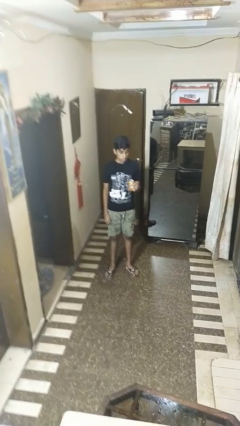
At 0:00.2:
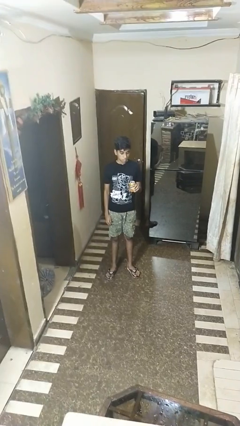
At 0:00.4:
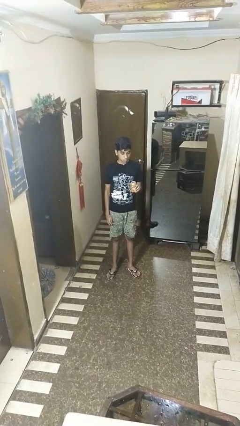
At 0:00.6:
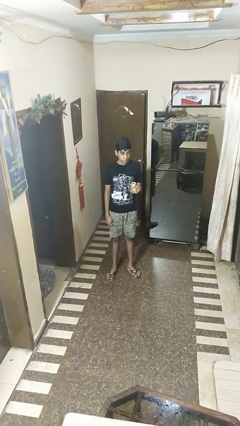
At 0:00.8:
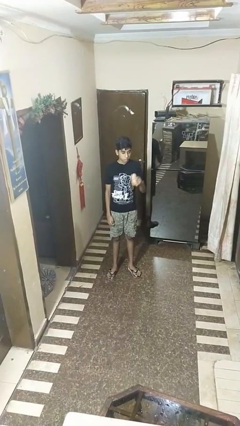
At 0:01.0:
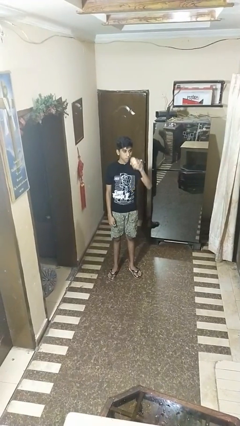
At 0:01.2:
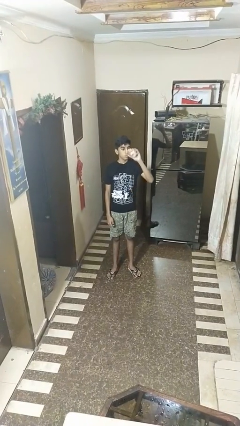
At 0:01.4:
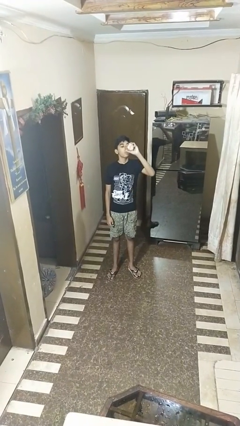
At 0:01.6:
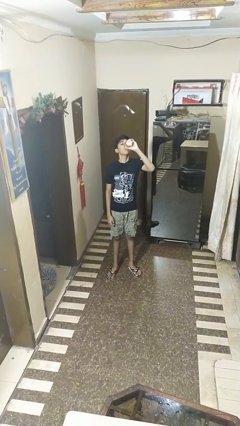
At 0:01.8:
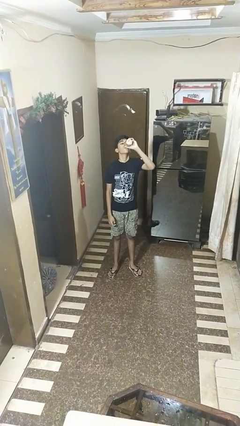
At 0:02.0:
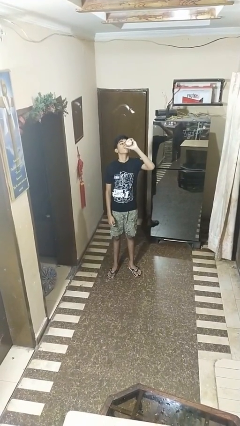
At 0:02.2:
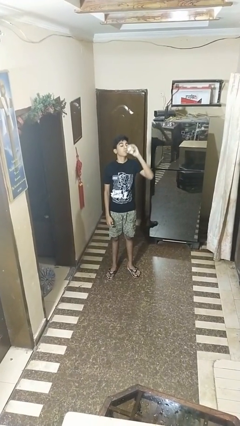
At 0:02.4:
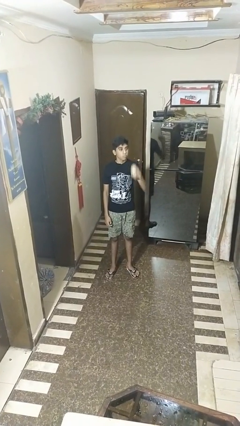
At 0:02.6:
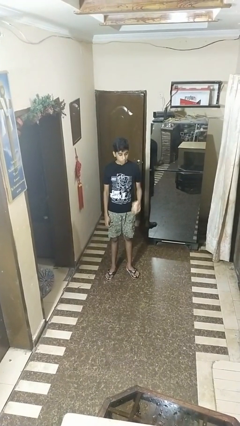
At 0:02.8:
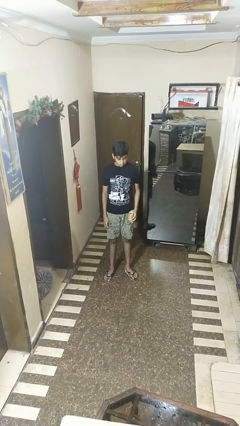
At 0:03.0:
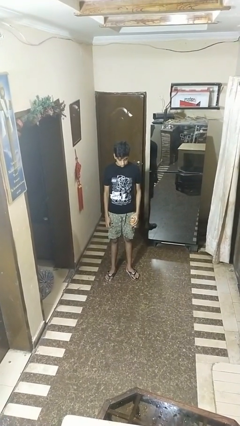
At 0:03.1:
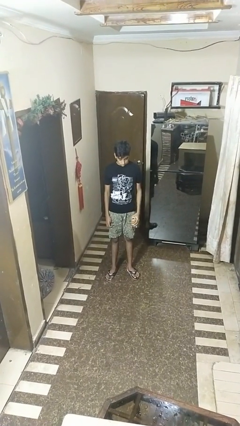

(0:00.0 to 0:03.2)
person drinks from beverage can

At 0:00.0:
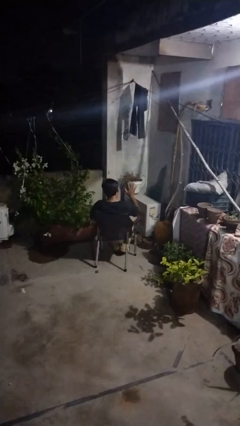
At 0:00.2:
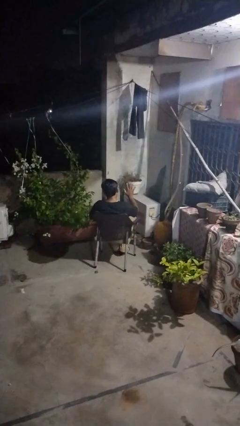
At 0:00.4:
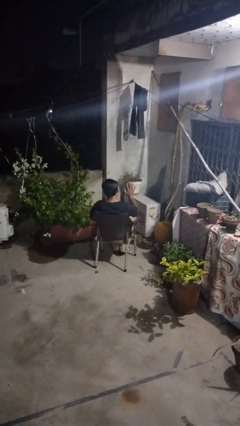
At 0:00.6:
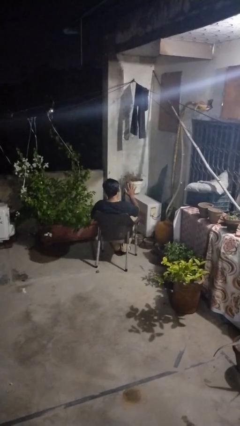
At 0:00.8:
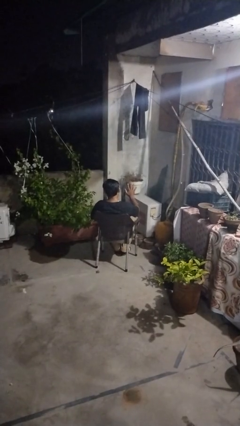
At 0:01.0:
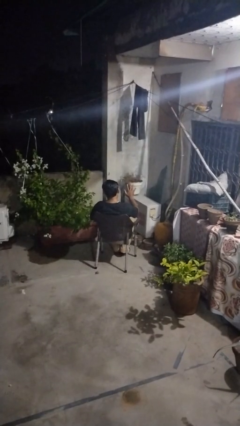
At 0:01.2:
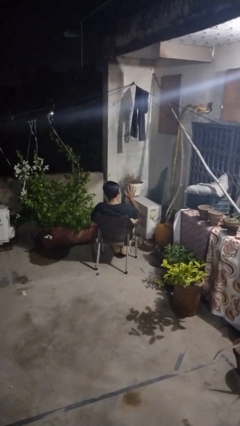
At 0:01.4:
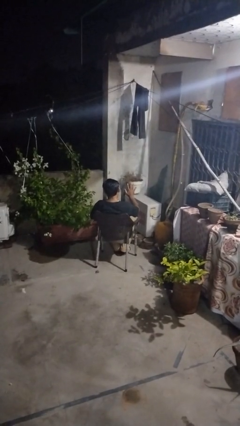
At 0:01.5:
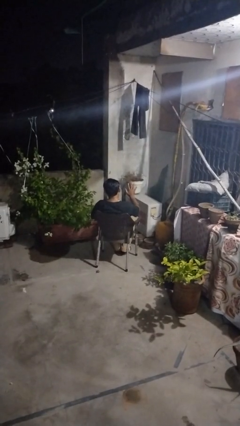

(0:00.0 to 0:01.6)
person gestures number five

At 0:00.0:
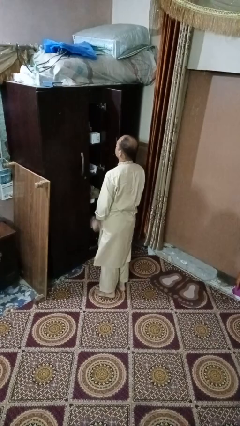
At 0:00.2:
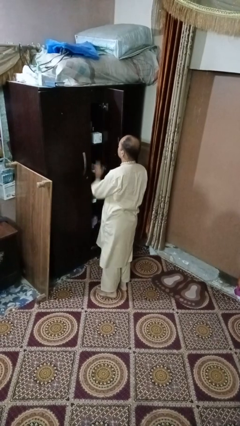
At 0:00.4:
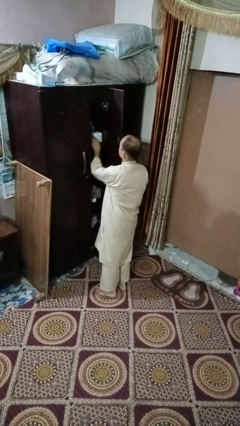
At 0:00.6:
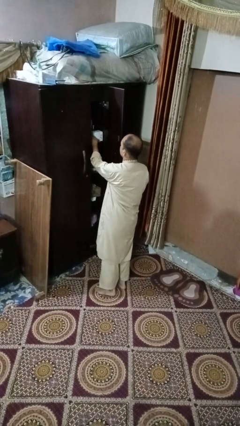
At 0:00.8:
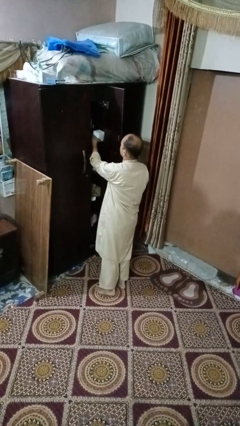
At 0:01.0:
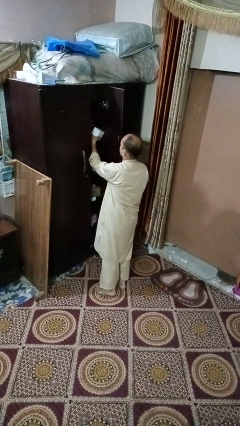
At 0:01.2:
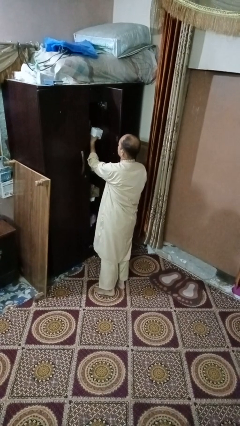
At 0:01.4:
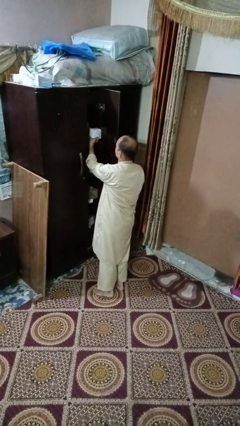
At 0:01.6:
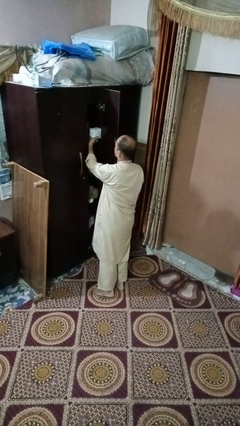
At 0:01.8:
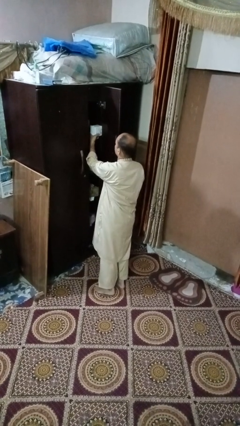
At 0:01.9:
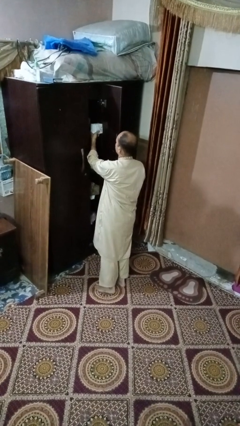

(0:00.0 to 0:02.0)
person picks up object from cabinet

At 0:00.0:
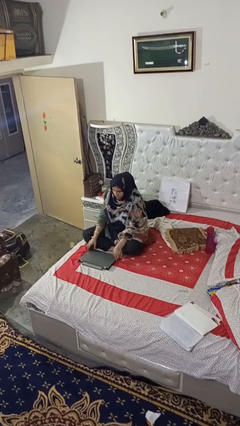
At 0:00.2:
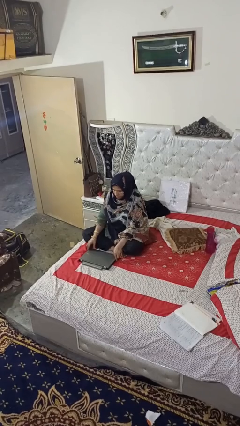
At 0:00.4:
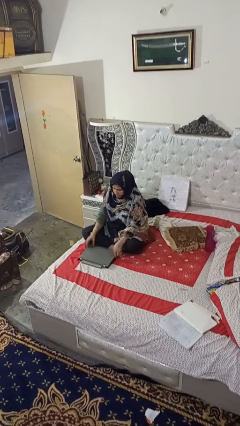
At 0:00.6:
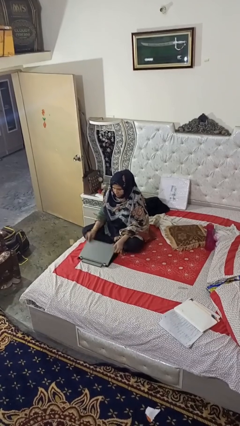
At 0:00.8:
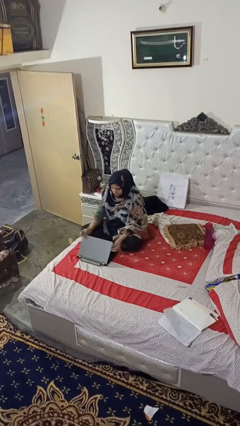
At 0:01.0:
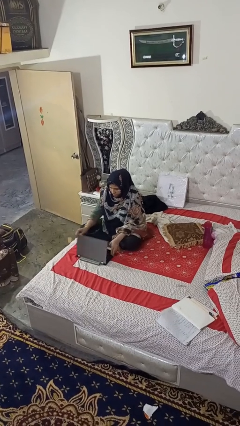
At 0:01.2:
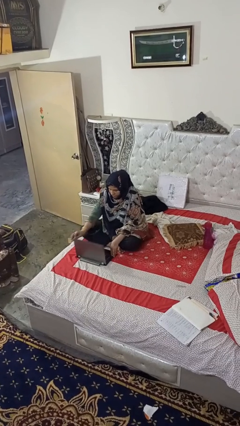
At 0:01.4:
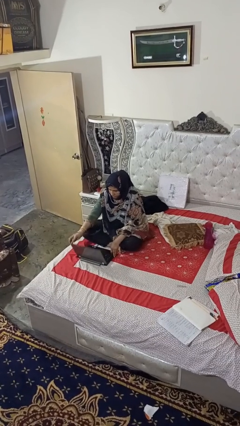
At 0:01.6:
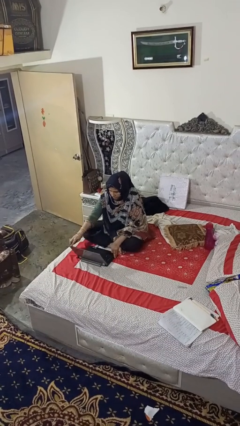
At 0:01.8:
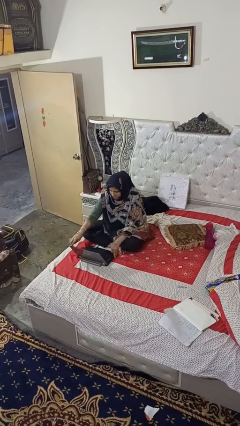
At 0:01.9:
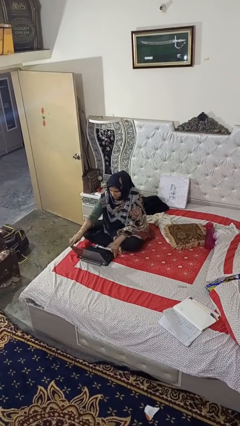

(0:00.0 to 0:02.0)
person opens laptop

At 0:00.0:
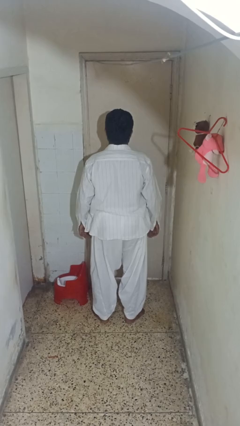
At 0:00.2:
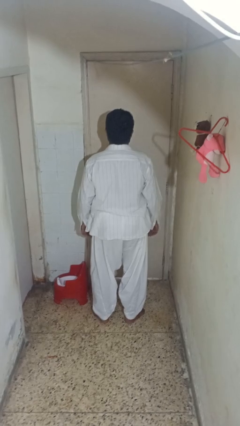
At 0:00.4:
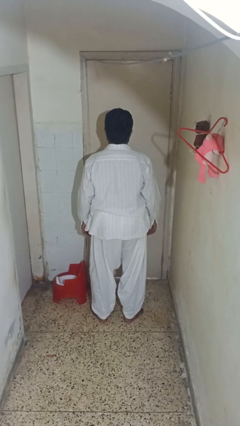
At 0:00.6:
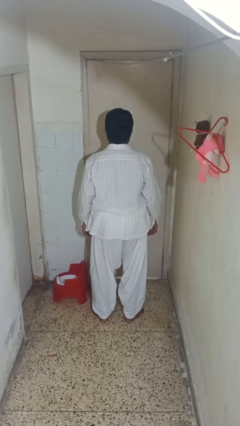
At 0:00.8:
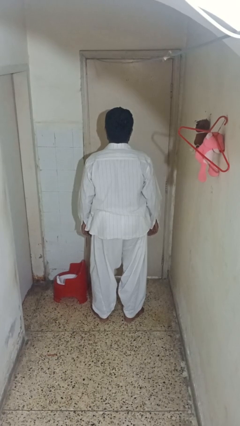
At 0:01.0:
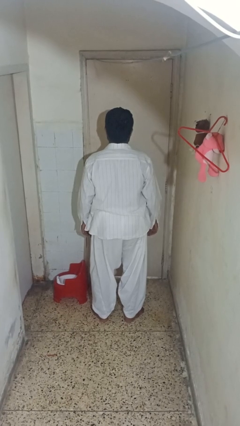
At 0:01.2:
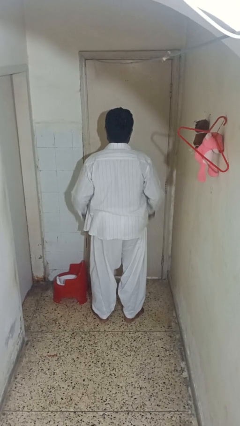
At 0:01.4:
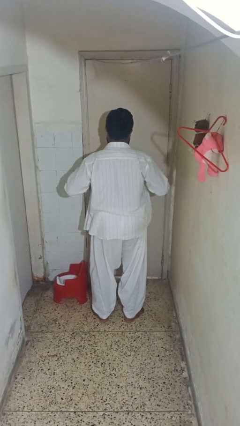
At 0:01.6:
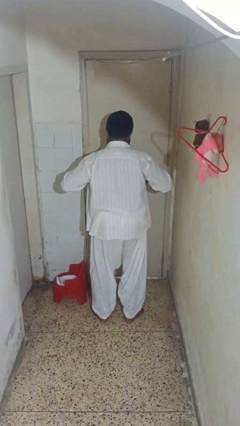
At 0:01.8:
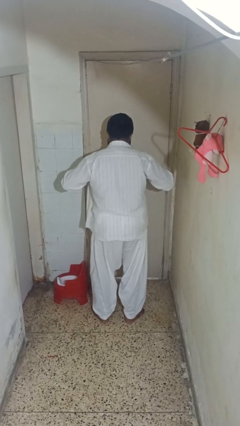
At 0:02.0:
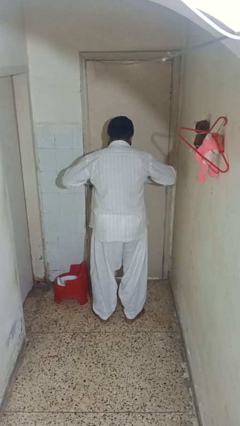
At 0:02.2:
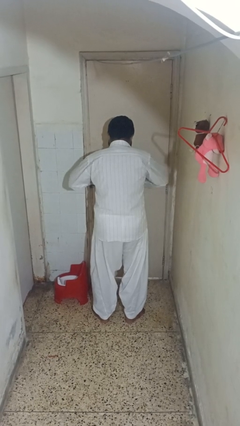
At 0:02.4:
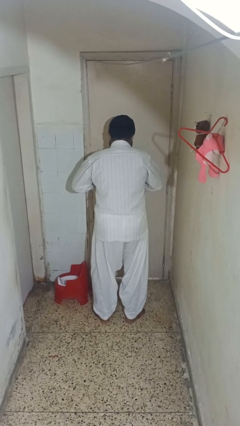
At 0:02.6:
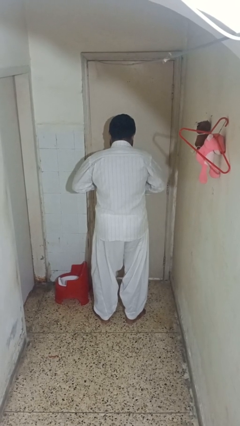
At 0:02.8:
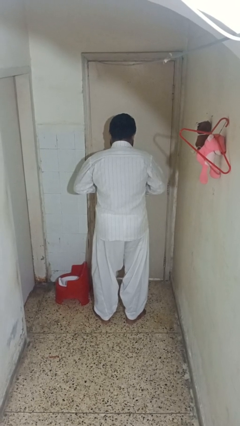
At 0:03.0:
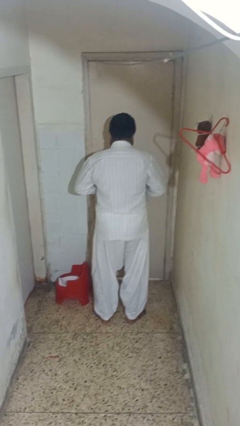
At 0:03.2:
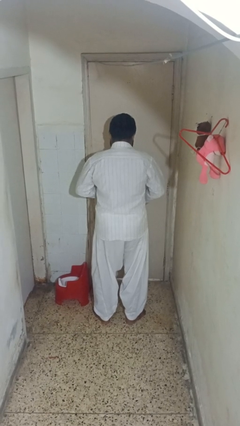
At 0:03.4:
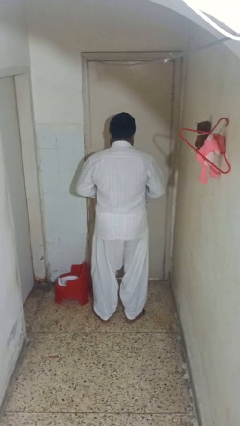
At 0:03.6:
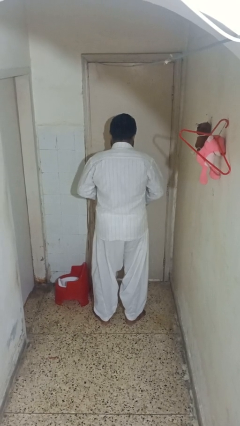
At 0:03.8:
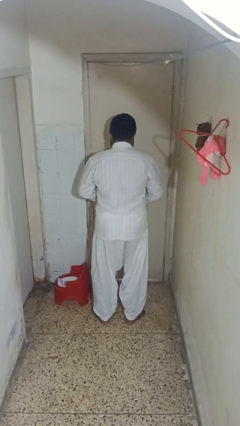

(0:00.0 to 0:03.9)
person buttons shirt

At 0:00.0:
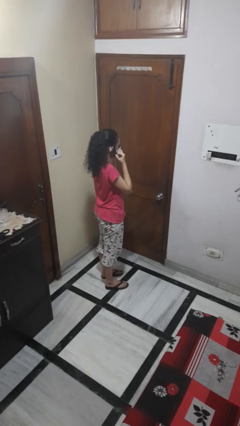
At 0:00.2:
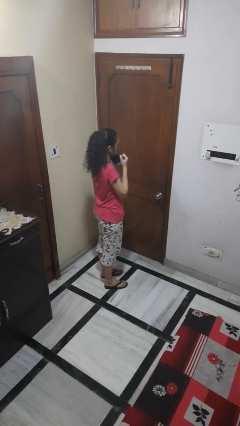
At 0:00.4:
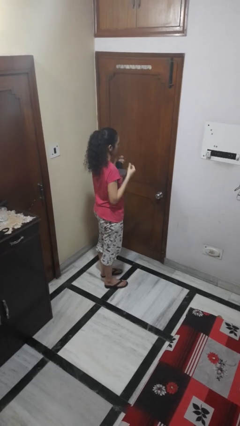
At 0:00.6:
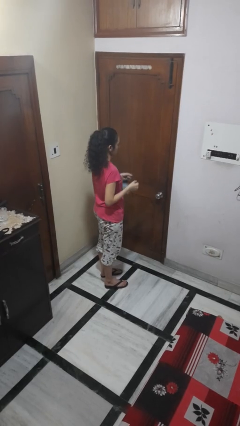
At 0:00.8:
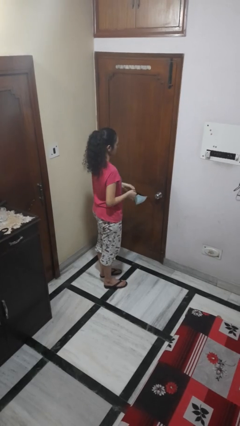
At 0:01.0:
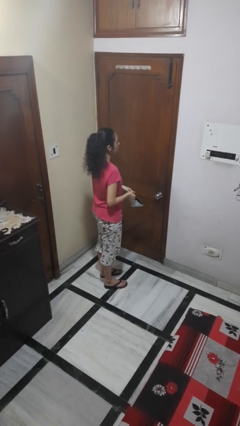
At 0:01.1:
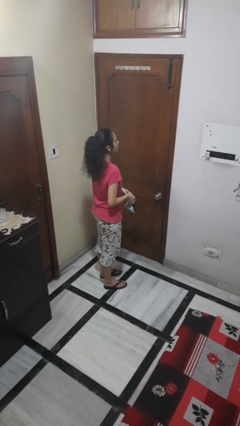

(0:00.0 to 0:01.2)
person takes off facemask

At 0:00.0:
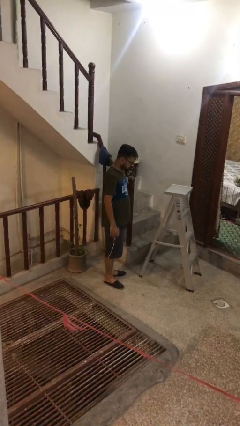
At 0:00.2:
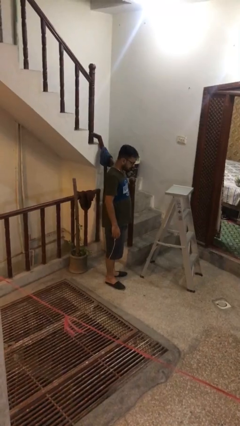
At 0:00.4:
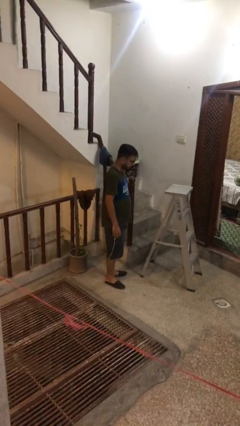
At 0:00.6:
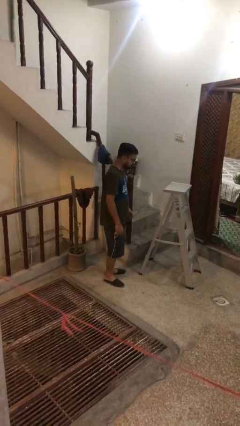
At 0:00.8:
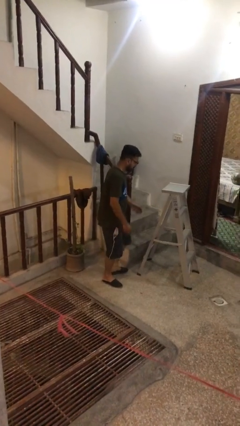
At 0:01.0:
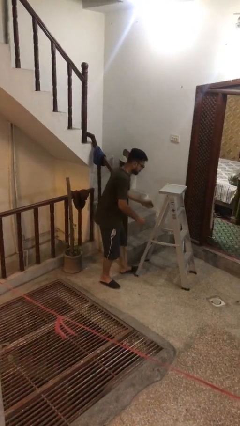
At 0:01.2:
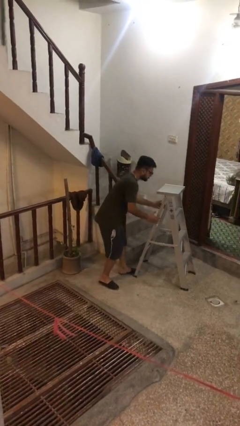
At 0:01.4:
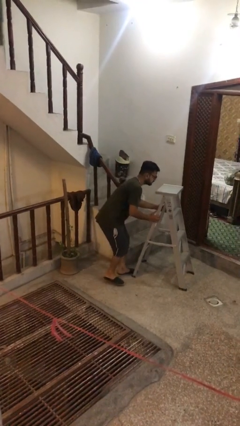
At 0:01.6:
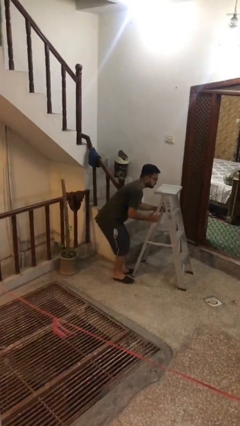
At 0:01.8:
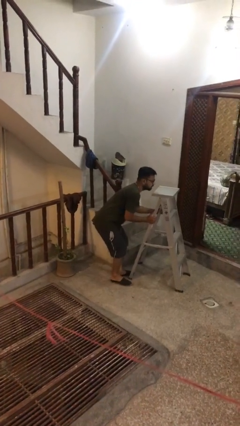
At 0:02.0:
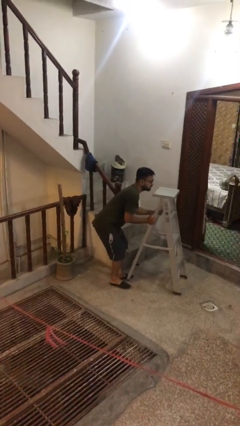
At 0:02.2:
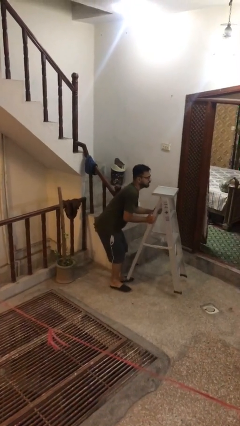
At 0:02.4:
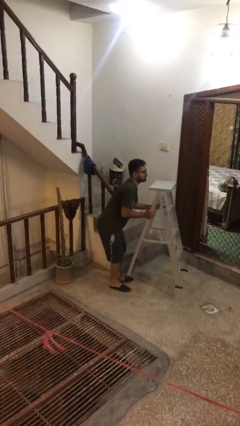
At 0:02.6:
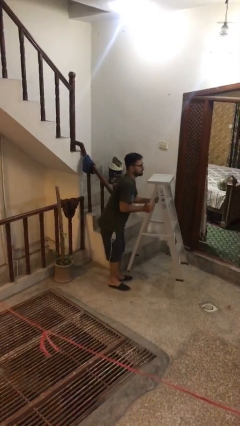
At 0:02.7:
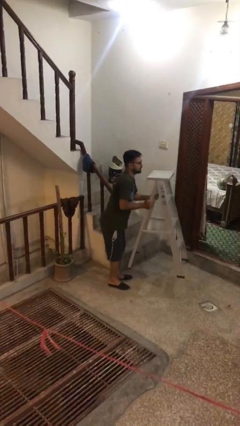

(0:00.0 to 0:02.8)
person picks up object from floor

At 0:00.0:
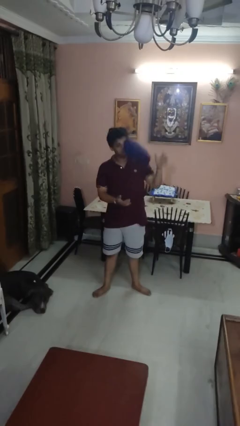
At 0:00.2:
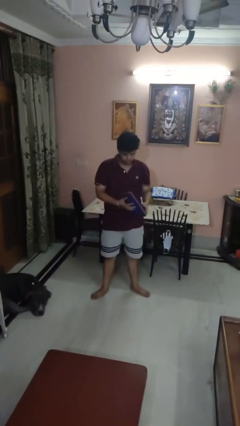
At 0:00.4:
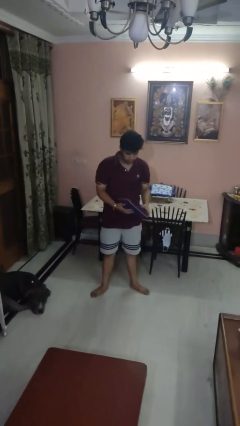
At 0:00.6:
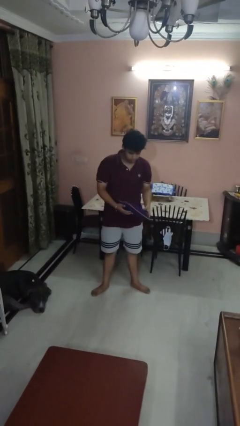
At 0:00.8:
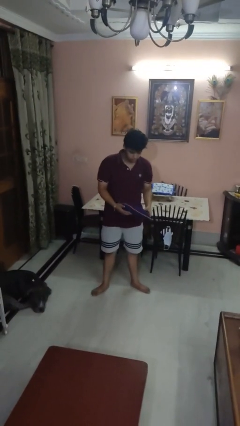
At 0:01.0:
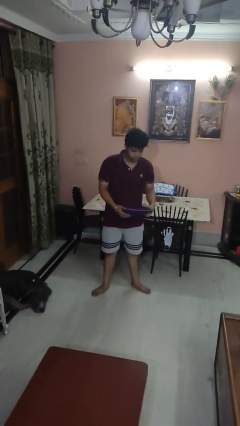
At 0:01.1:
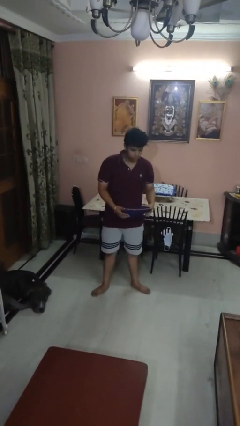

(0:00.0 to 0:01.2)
person catches dropped object
